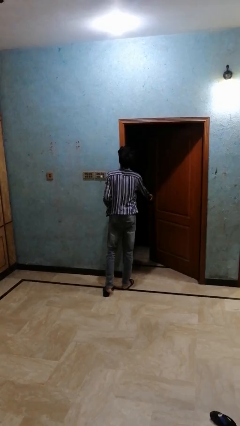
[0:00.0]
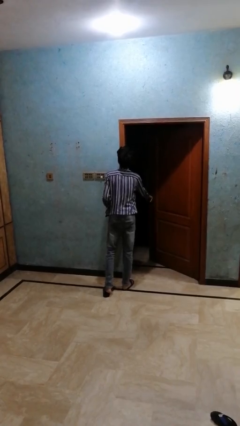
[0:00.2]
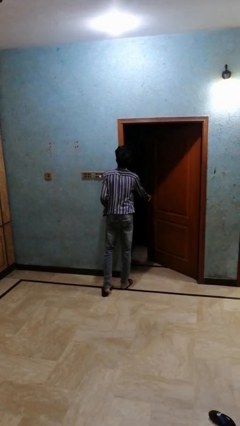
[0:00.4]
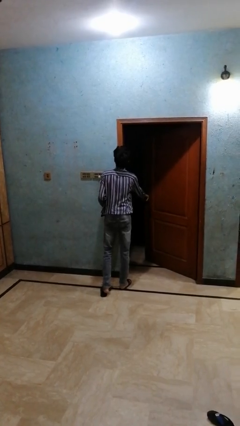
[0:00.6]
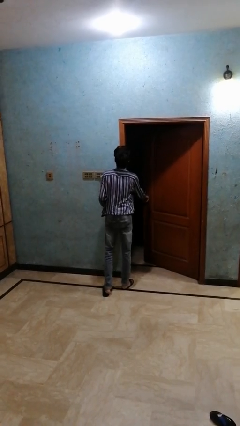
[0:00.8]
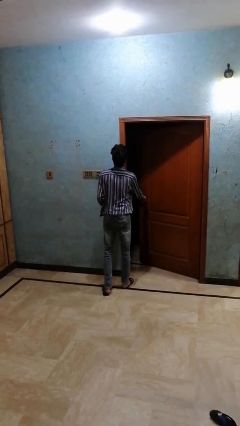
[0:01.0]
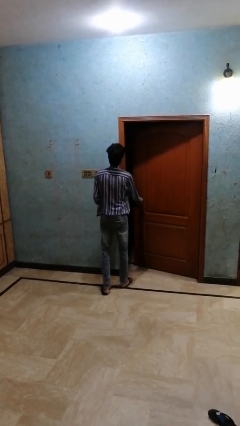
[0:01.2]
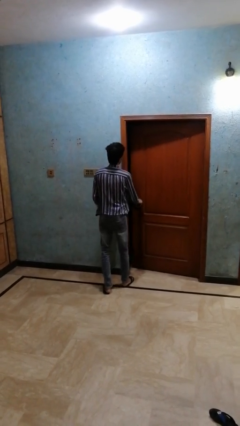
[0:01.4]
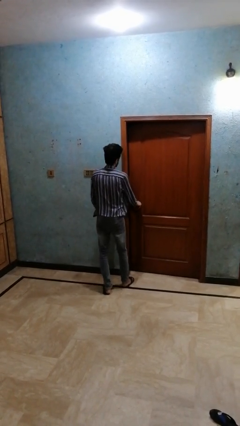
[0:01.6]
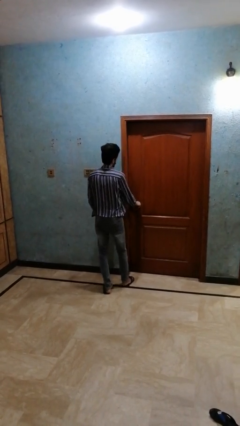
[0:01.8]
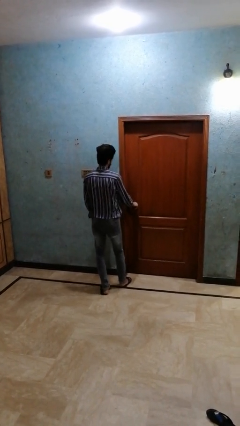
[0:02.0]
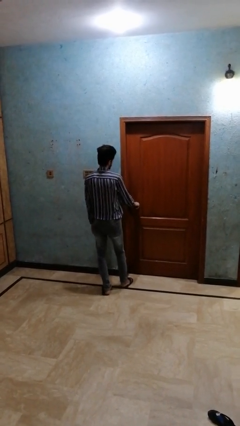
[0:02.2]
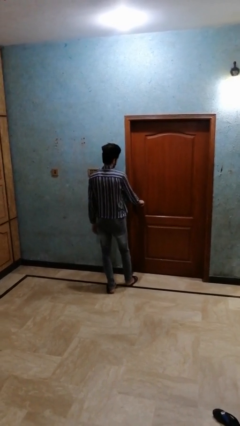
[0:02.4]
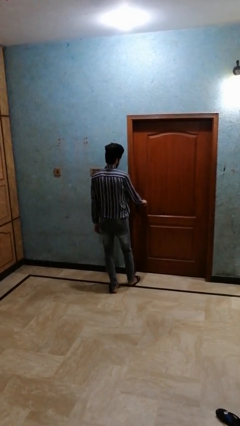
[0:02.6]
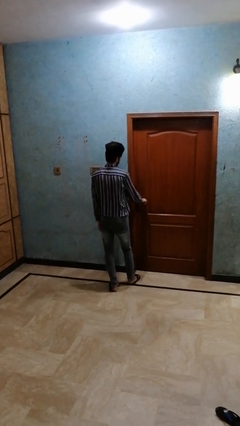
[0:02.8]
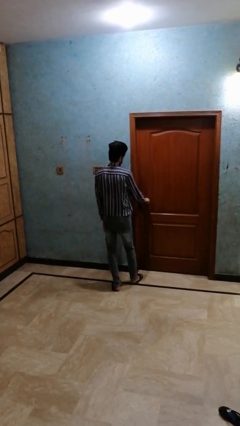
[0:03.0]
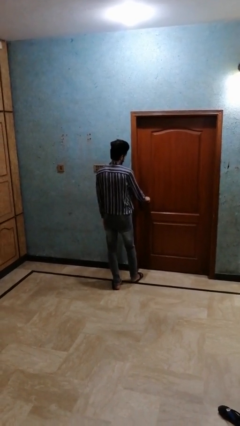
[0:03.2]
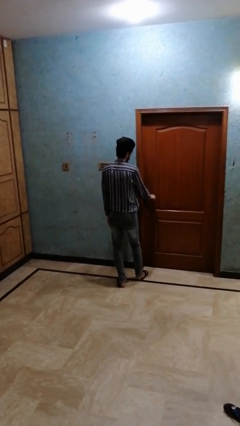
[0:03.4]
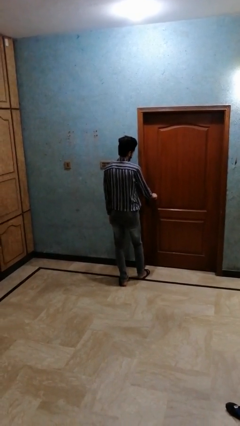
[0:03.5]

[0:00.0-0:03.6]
person closes closet door

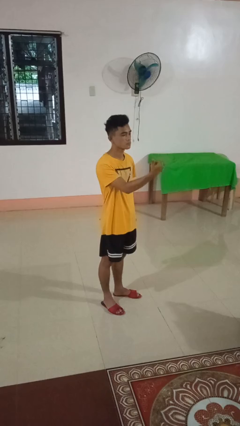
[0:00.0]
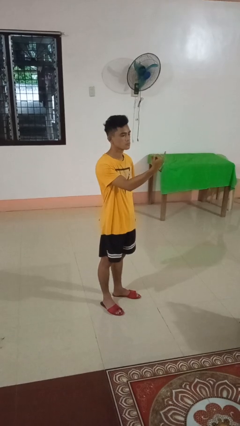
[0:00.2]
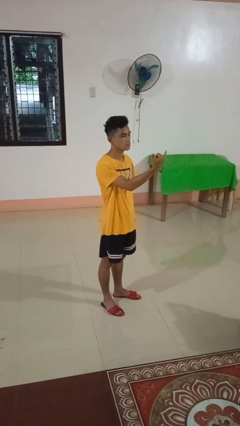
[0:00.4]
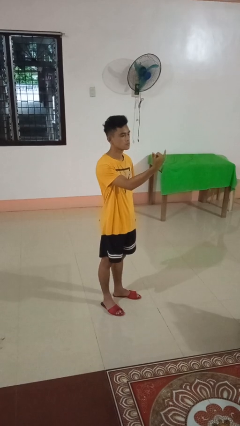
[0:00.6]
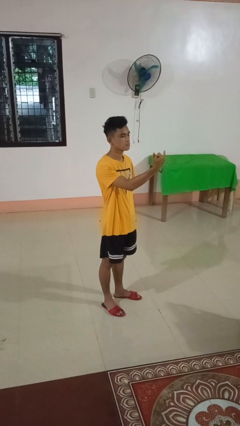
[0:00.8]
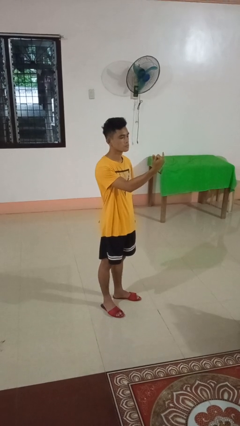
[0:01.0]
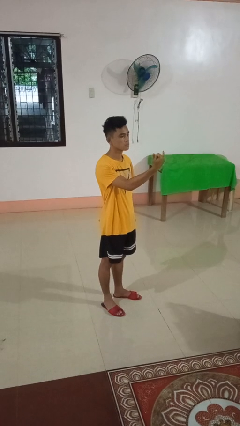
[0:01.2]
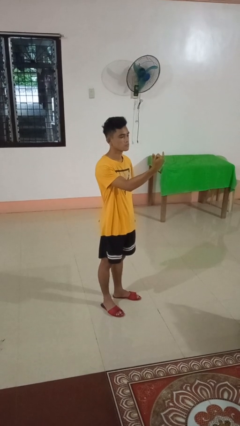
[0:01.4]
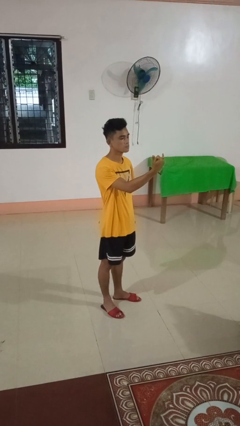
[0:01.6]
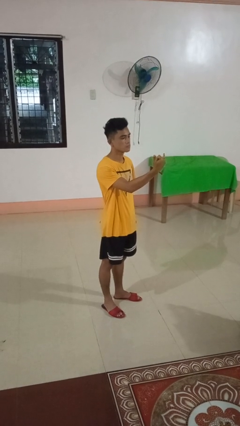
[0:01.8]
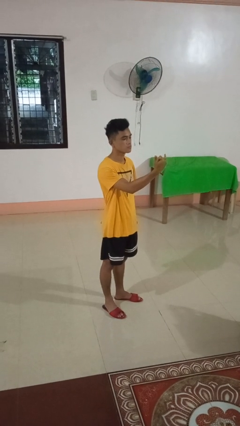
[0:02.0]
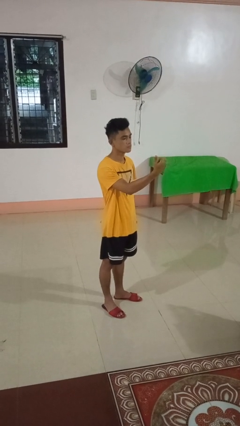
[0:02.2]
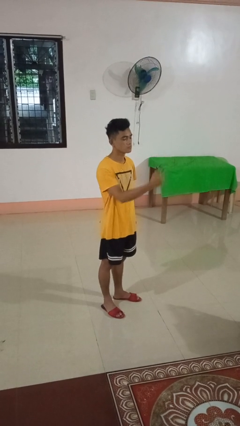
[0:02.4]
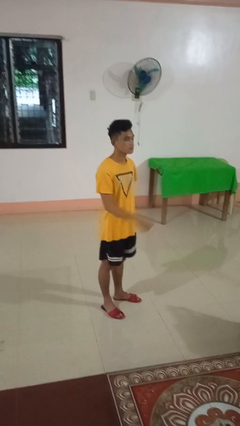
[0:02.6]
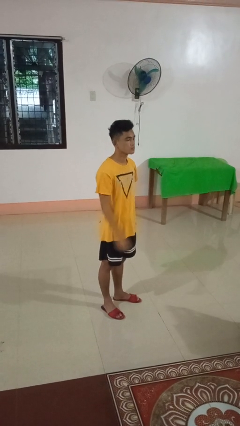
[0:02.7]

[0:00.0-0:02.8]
person gestures hang loose

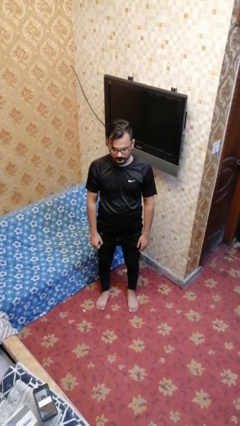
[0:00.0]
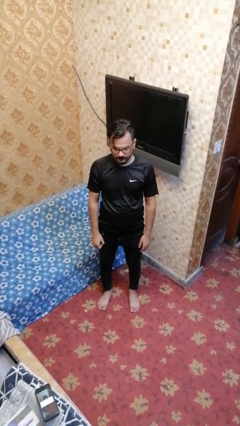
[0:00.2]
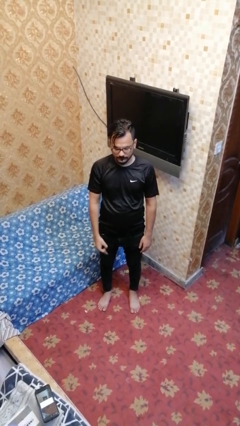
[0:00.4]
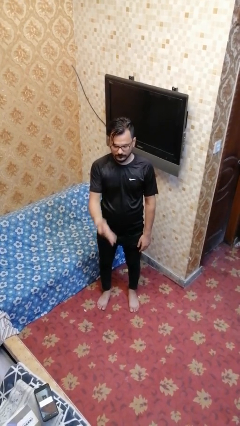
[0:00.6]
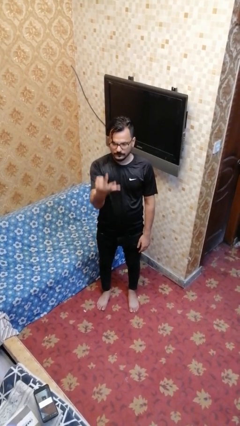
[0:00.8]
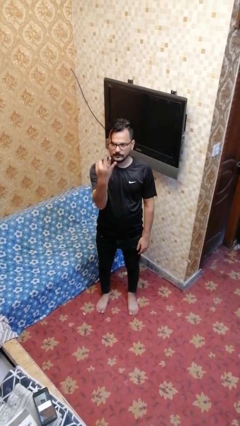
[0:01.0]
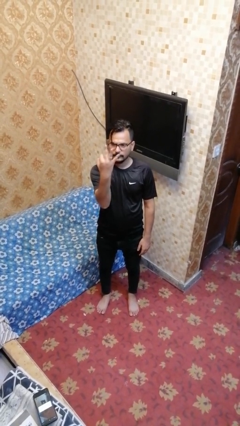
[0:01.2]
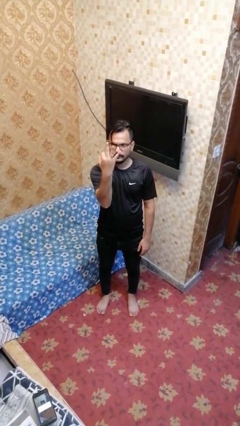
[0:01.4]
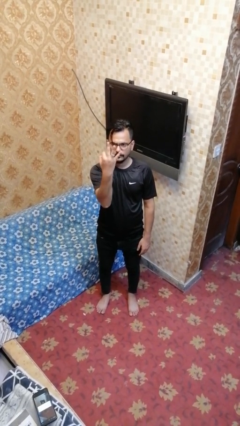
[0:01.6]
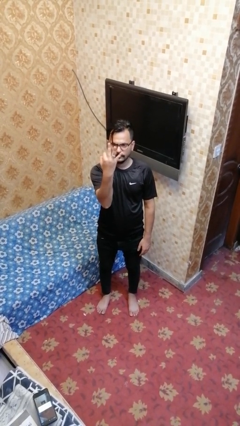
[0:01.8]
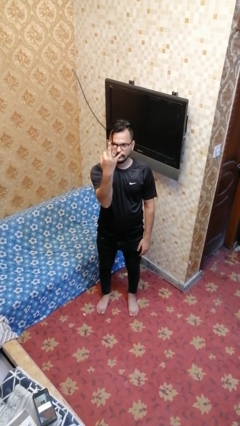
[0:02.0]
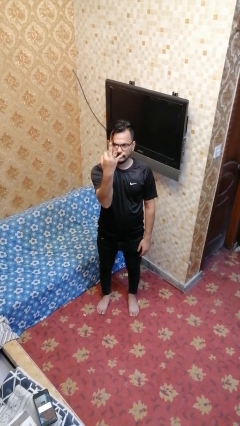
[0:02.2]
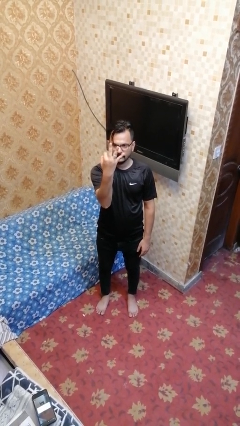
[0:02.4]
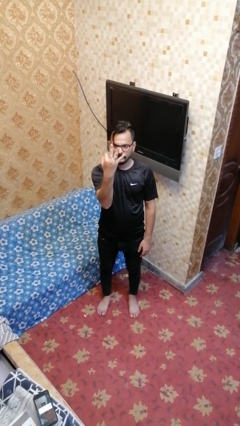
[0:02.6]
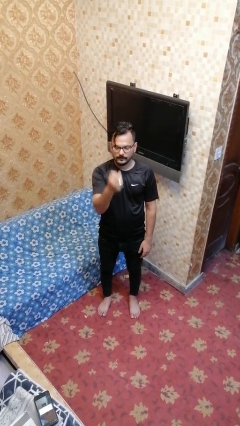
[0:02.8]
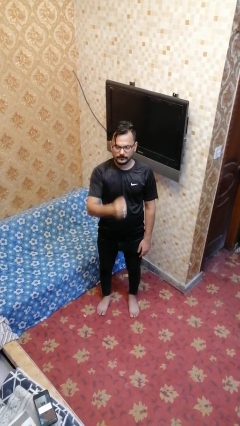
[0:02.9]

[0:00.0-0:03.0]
person gestures number three

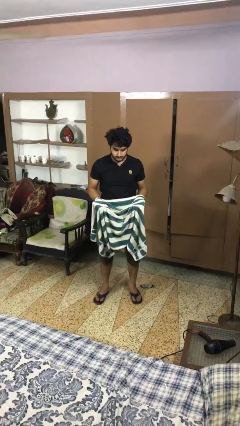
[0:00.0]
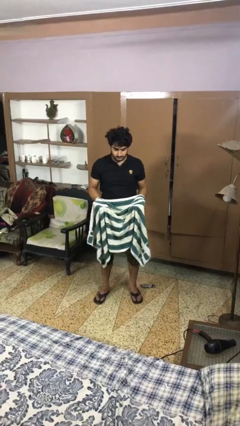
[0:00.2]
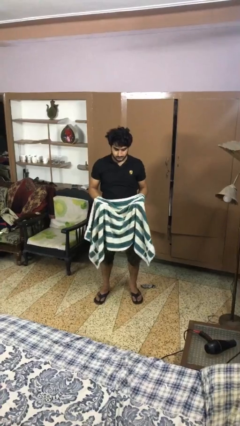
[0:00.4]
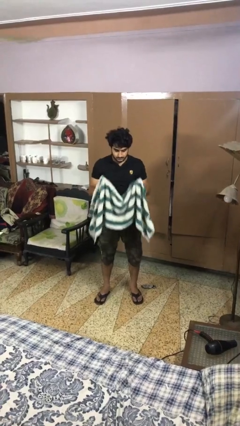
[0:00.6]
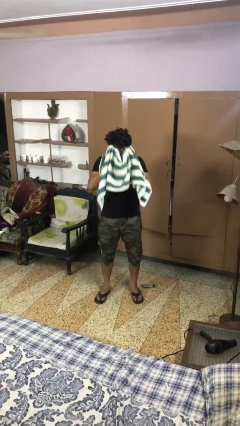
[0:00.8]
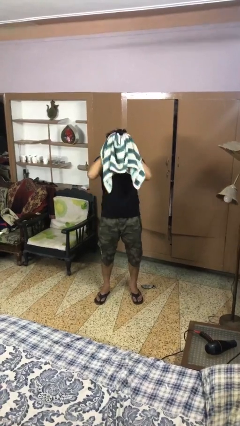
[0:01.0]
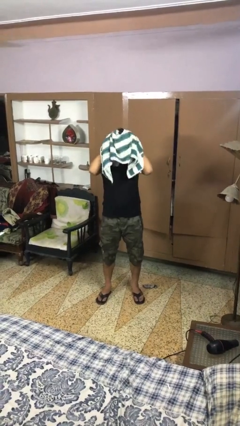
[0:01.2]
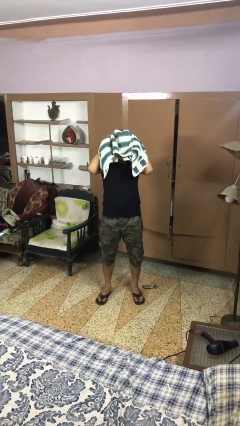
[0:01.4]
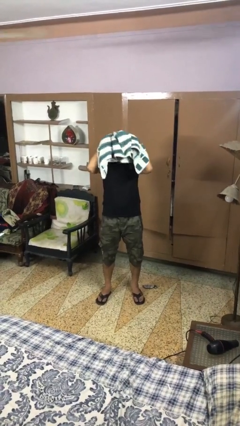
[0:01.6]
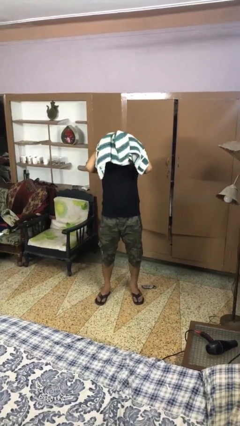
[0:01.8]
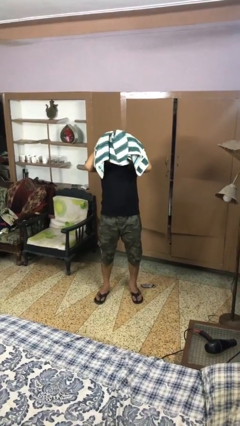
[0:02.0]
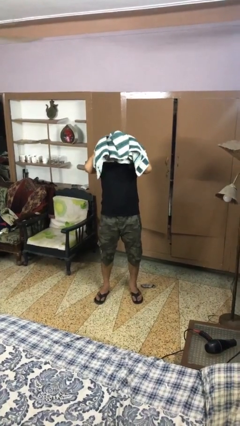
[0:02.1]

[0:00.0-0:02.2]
person dries hair with towel

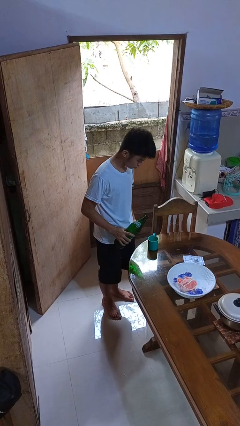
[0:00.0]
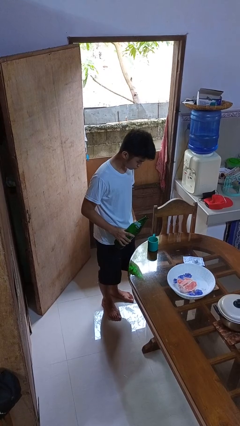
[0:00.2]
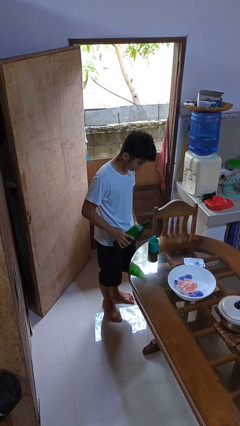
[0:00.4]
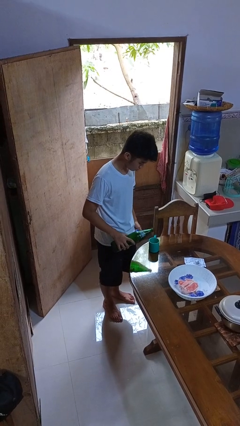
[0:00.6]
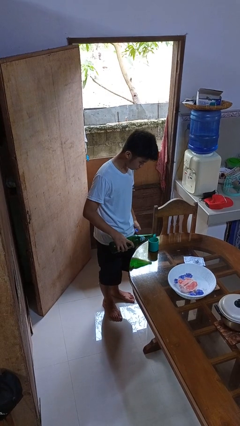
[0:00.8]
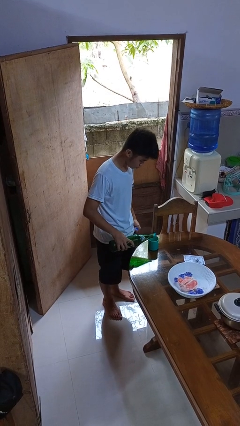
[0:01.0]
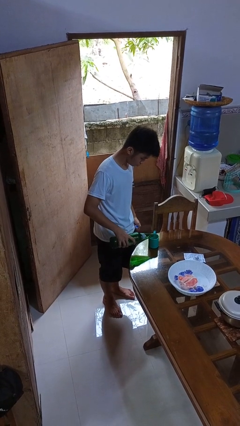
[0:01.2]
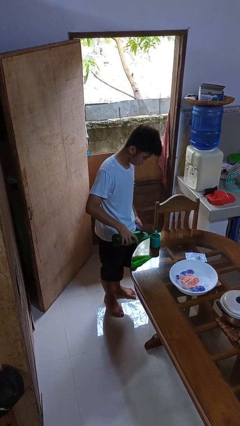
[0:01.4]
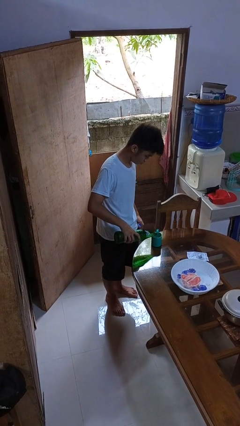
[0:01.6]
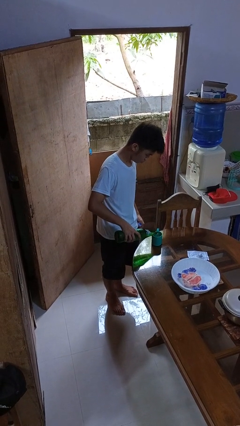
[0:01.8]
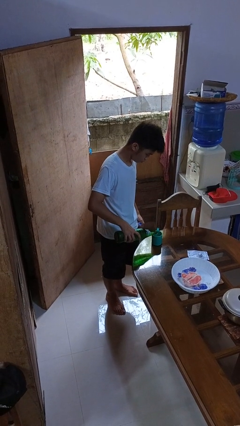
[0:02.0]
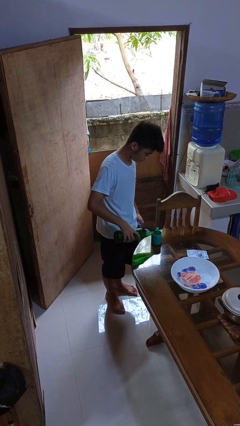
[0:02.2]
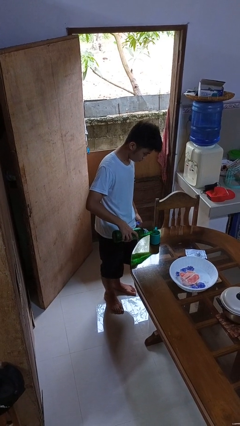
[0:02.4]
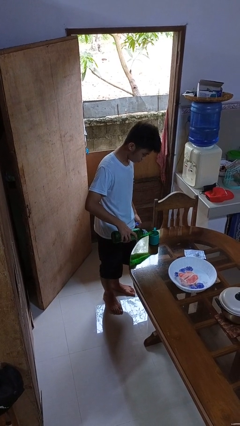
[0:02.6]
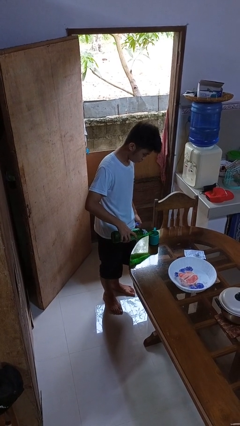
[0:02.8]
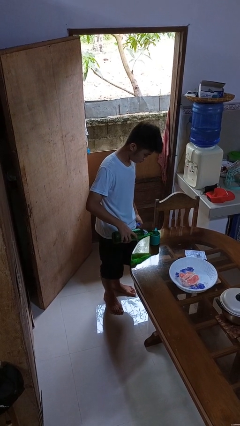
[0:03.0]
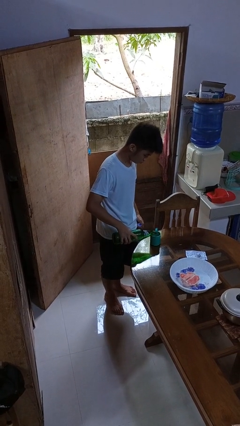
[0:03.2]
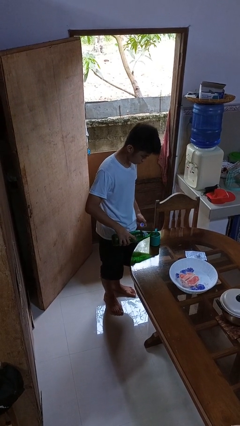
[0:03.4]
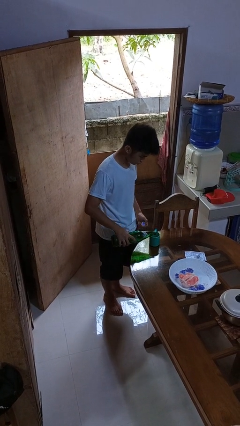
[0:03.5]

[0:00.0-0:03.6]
person pours liquid into cup

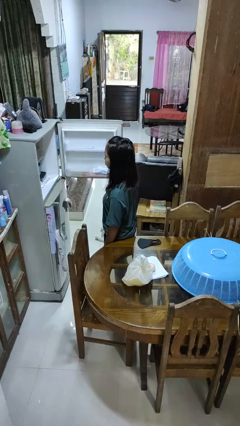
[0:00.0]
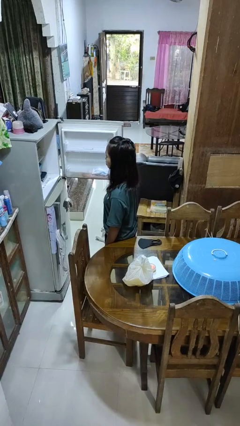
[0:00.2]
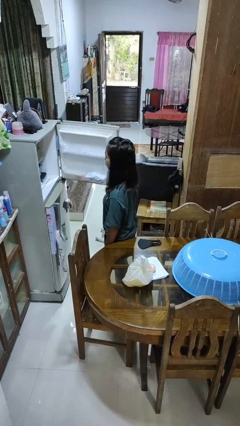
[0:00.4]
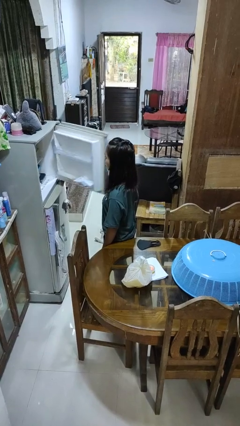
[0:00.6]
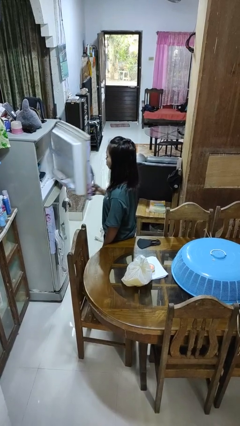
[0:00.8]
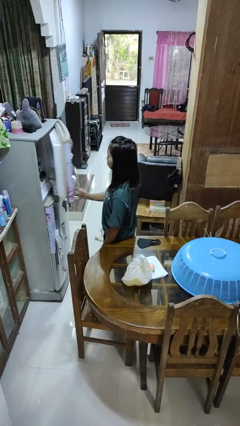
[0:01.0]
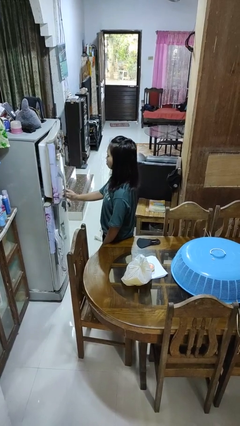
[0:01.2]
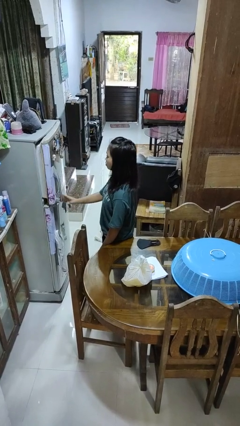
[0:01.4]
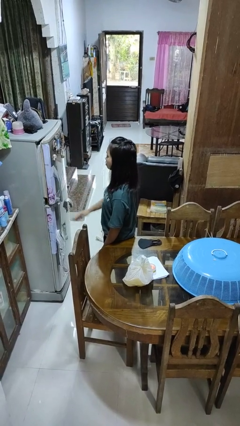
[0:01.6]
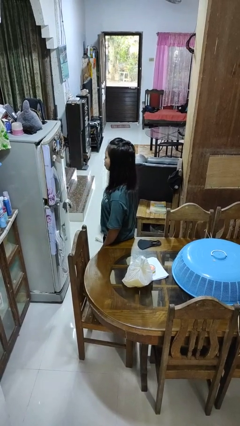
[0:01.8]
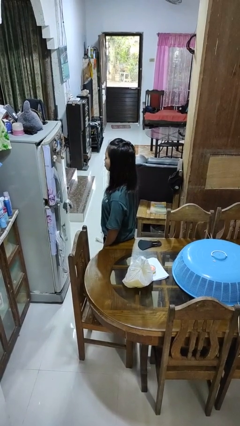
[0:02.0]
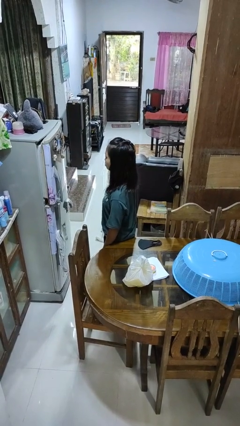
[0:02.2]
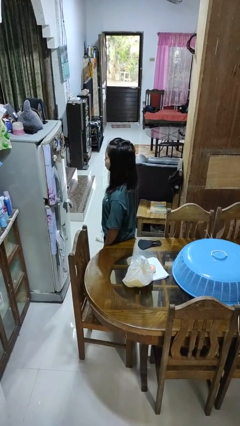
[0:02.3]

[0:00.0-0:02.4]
person closes refrigerator

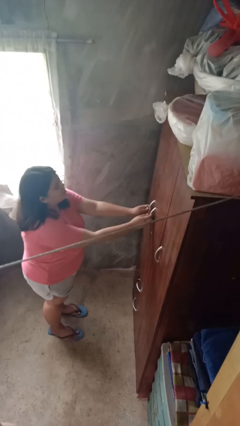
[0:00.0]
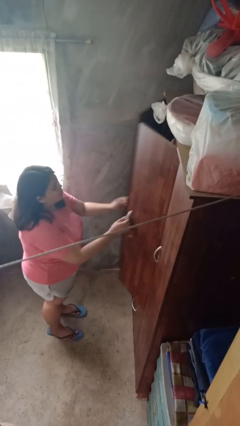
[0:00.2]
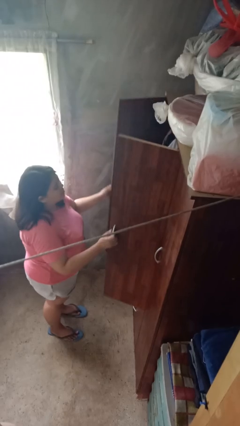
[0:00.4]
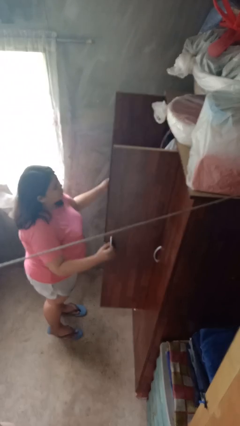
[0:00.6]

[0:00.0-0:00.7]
person opens closet door
